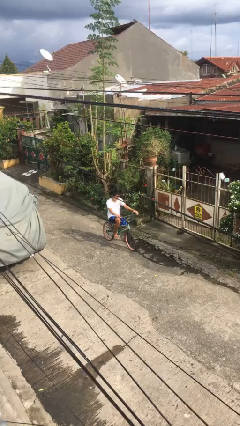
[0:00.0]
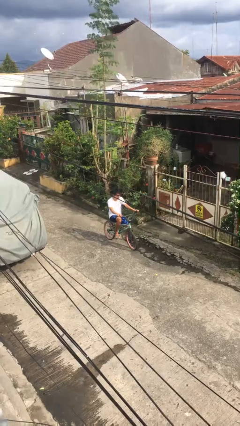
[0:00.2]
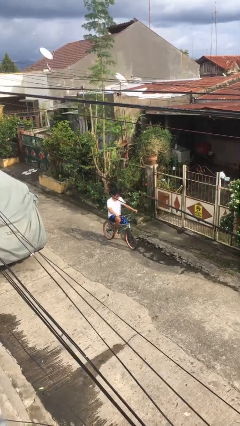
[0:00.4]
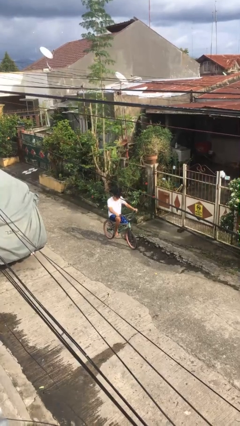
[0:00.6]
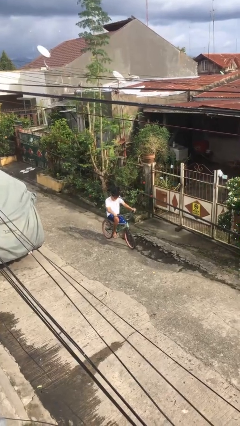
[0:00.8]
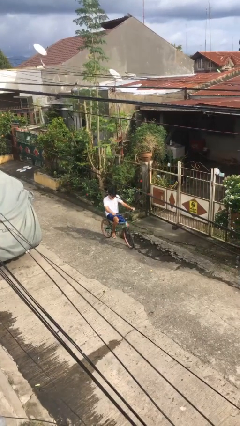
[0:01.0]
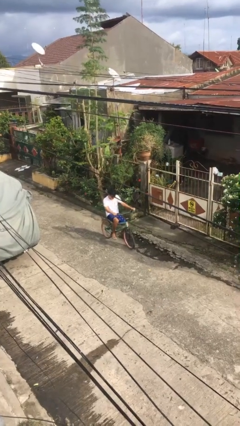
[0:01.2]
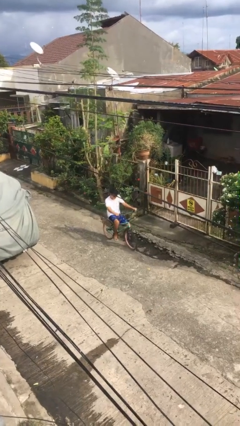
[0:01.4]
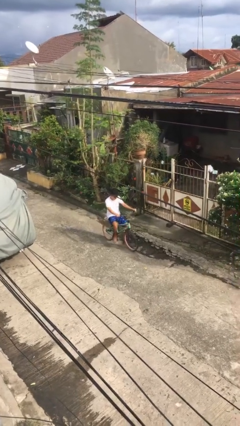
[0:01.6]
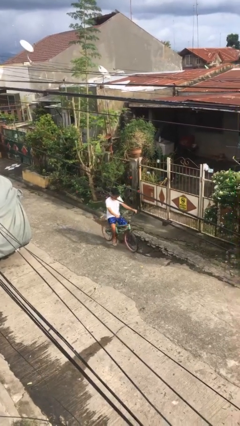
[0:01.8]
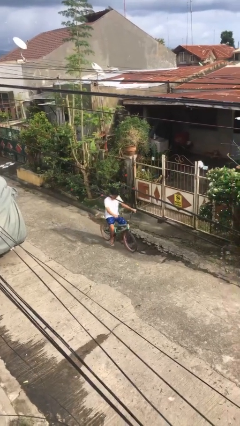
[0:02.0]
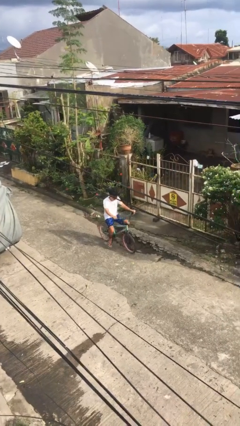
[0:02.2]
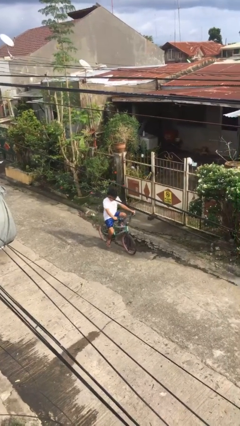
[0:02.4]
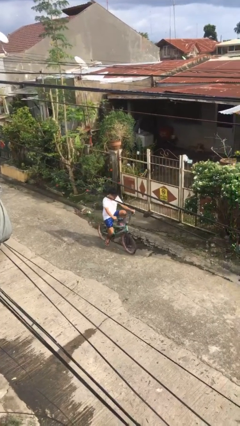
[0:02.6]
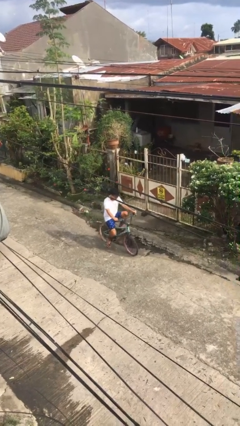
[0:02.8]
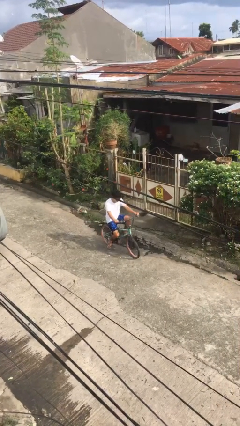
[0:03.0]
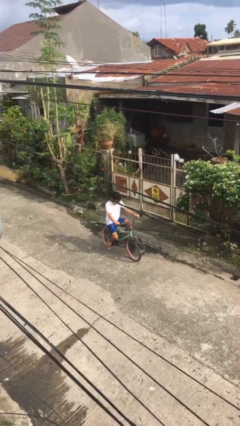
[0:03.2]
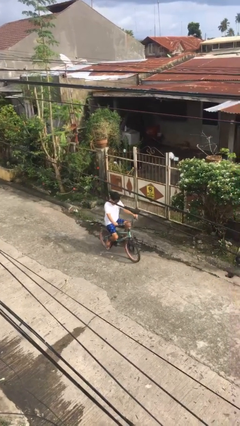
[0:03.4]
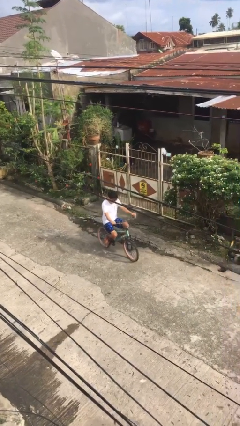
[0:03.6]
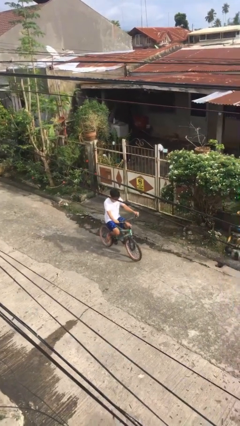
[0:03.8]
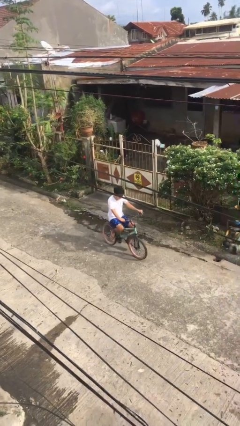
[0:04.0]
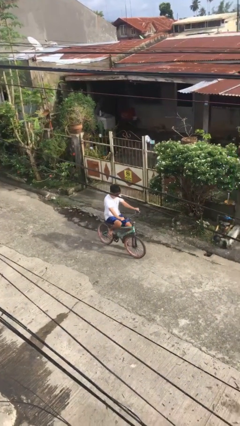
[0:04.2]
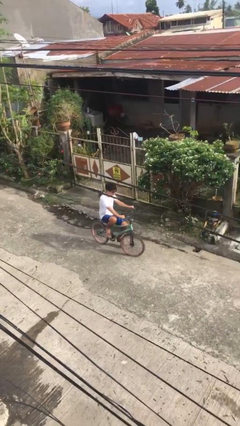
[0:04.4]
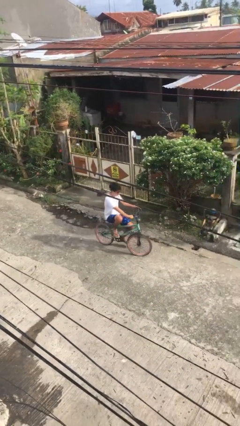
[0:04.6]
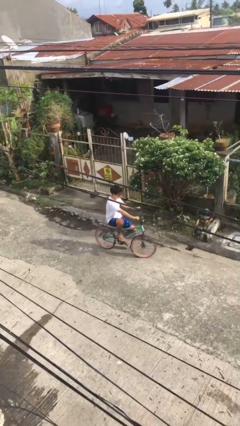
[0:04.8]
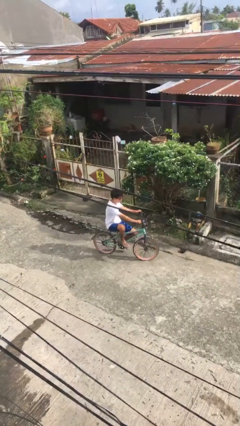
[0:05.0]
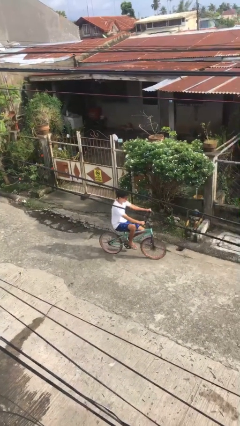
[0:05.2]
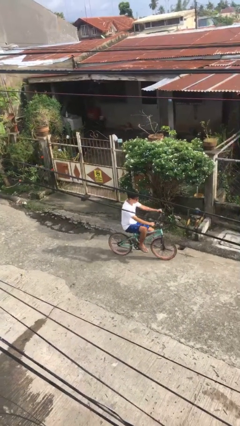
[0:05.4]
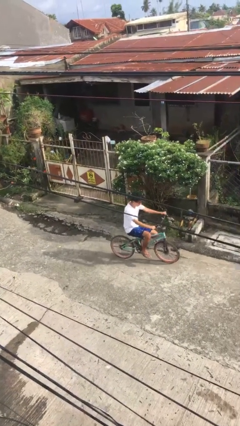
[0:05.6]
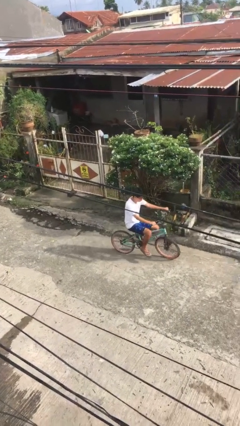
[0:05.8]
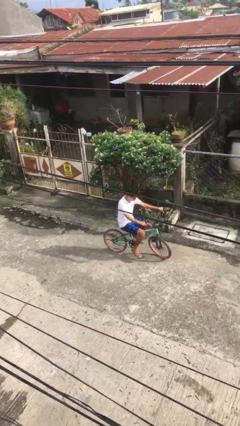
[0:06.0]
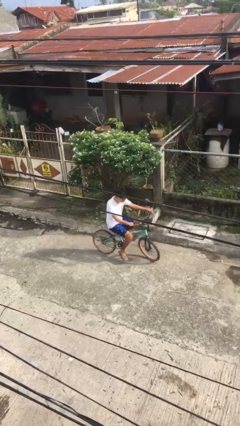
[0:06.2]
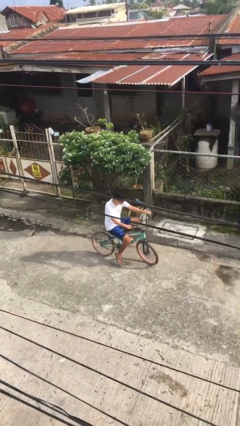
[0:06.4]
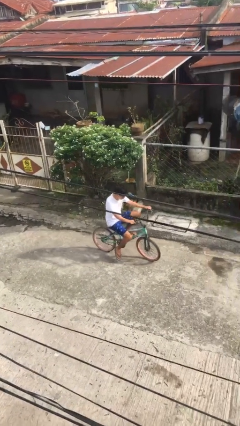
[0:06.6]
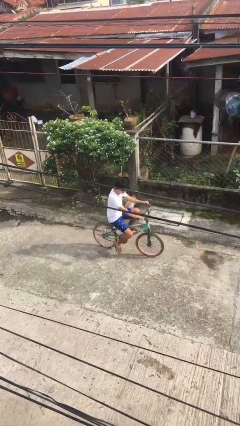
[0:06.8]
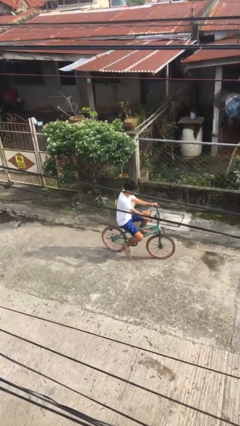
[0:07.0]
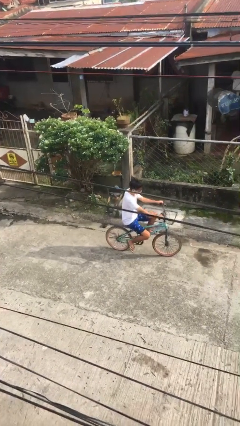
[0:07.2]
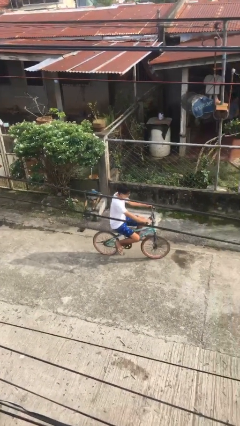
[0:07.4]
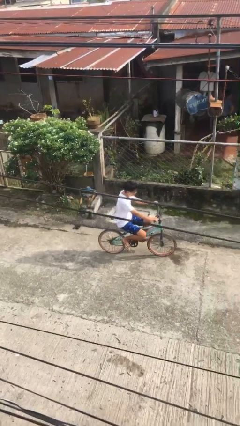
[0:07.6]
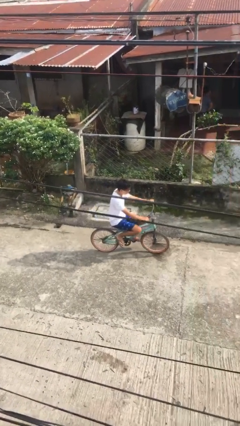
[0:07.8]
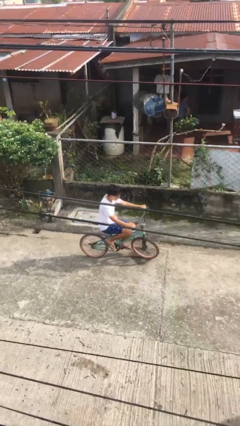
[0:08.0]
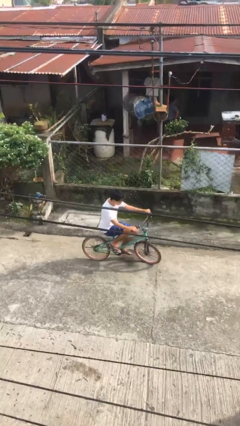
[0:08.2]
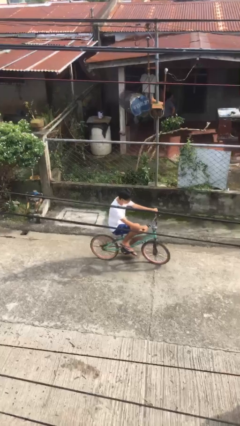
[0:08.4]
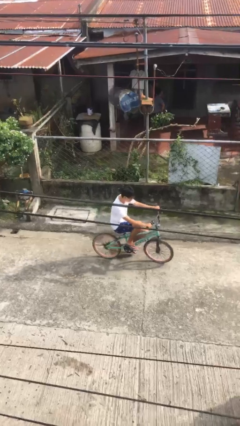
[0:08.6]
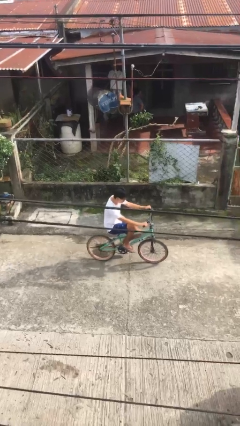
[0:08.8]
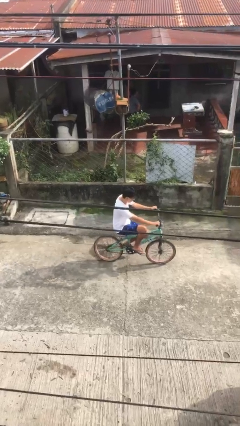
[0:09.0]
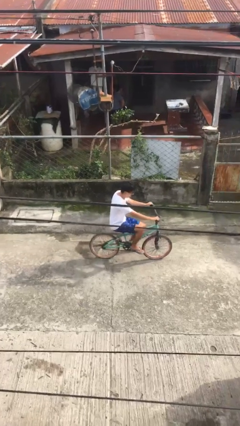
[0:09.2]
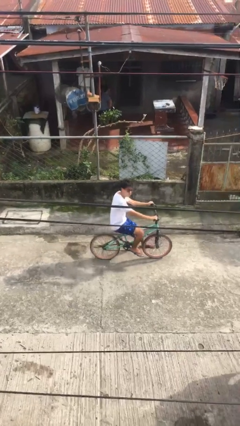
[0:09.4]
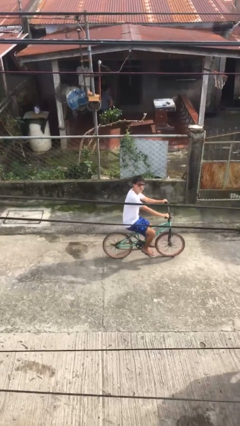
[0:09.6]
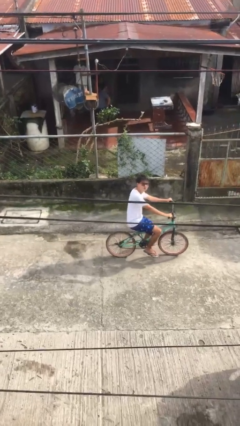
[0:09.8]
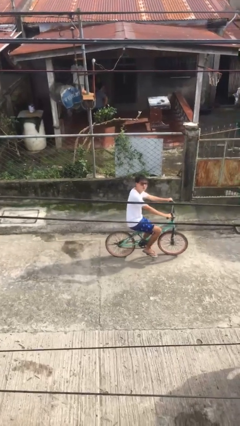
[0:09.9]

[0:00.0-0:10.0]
person rides bicycle

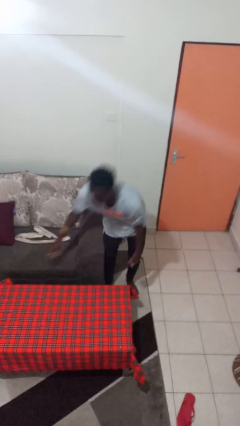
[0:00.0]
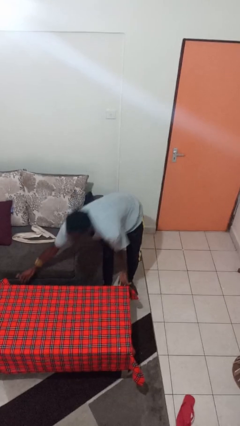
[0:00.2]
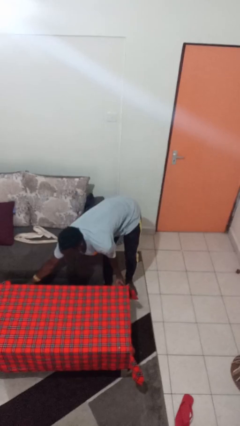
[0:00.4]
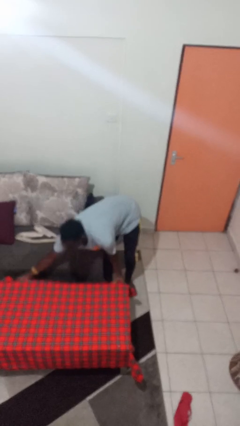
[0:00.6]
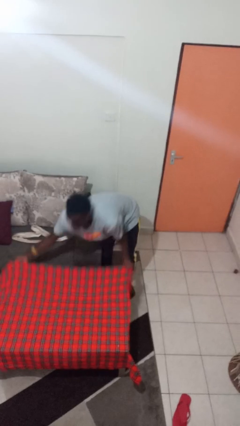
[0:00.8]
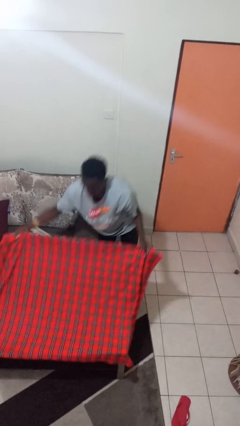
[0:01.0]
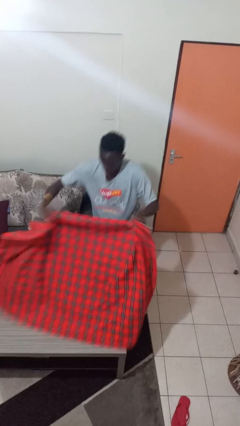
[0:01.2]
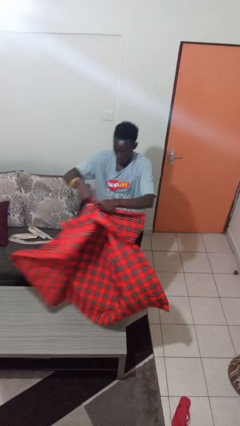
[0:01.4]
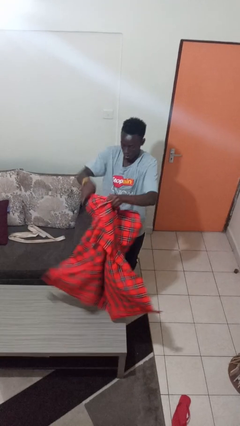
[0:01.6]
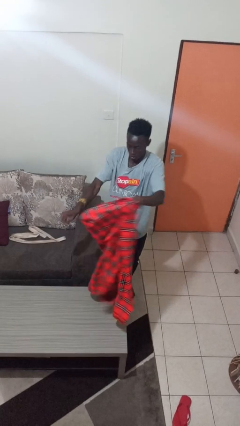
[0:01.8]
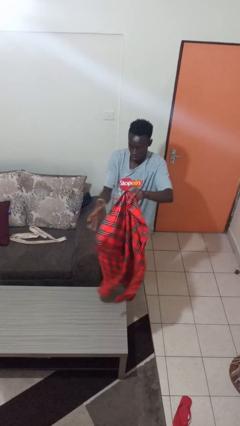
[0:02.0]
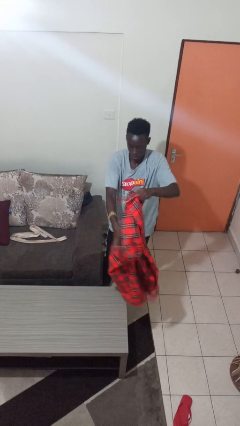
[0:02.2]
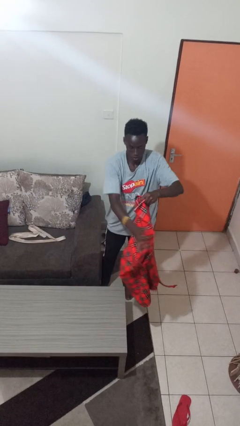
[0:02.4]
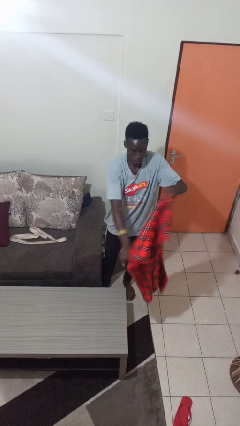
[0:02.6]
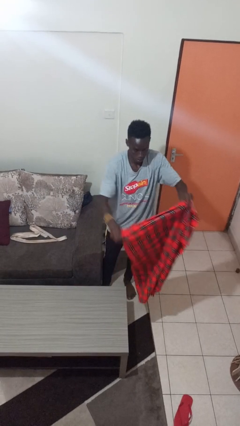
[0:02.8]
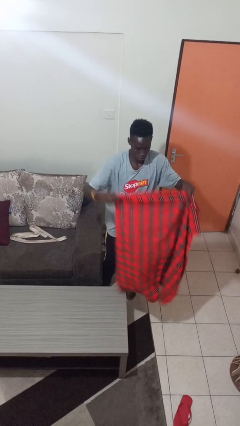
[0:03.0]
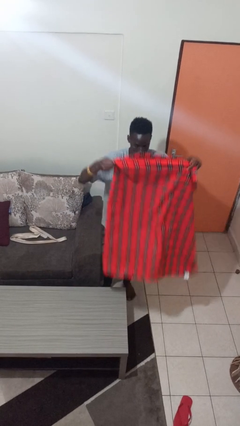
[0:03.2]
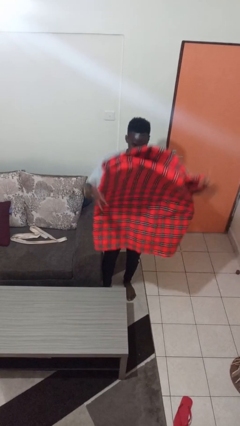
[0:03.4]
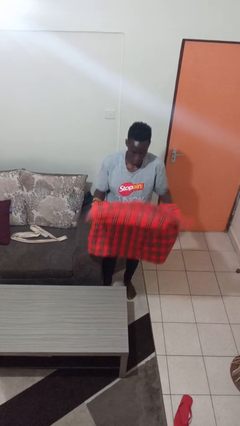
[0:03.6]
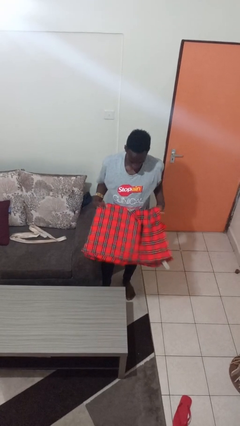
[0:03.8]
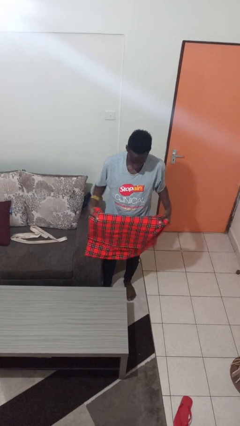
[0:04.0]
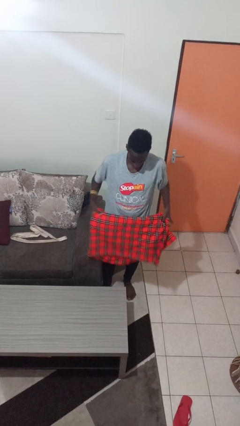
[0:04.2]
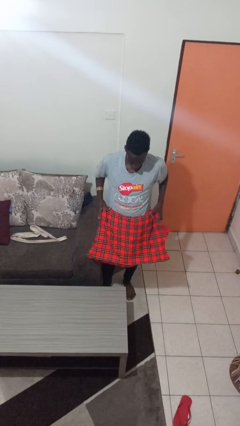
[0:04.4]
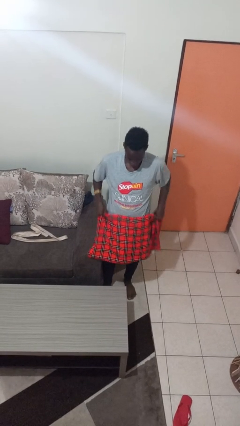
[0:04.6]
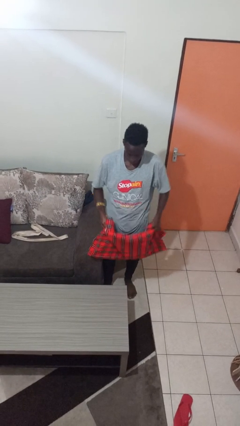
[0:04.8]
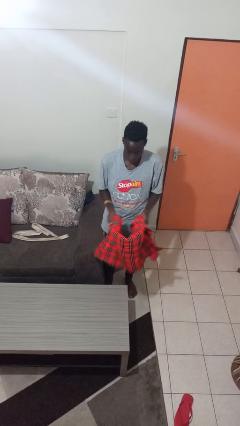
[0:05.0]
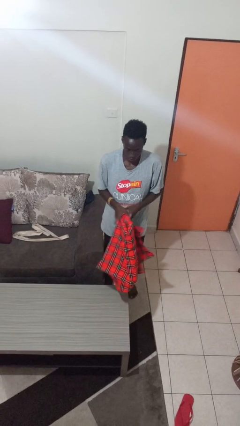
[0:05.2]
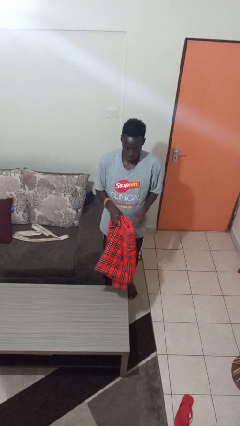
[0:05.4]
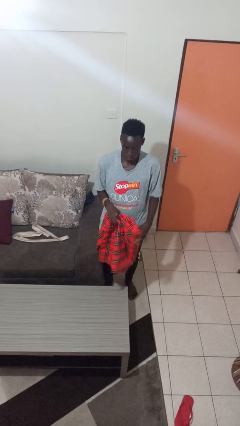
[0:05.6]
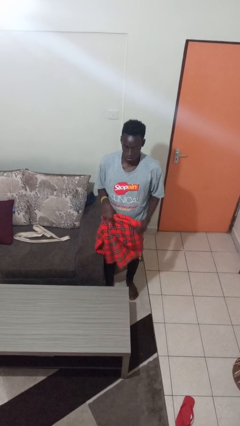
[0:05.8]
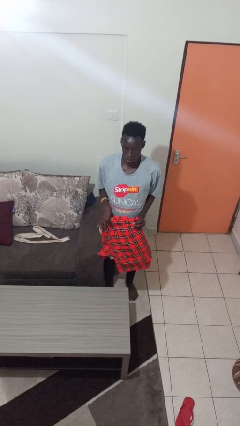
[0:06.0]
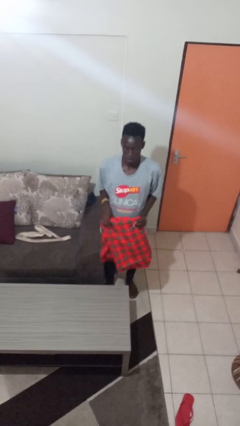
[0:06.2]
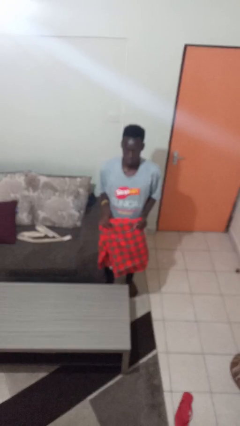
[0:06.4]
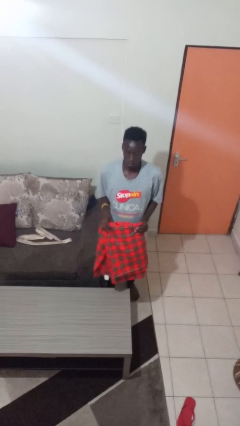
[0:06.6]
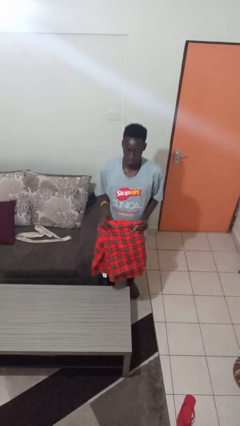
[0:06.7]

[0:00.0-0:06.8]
person folds tablecloth

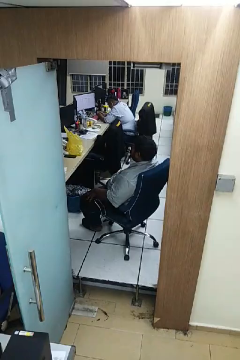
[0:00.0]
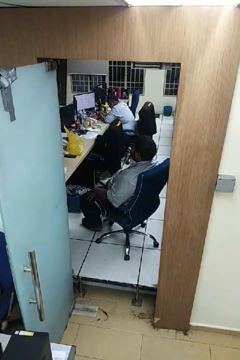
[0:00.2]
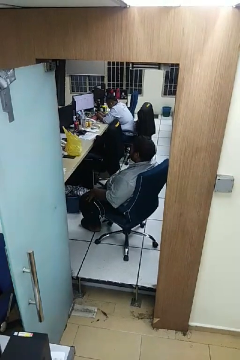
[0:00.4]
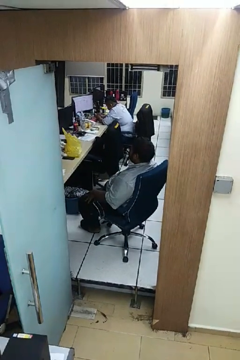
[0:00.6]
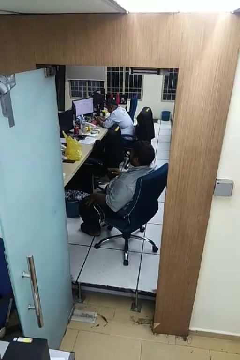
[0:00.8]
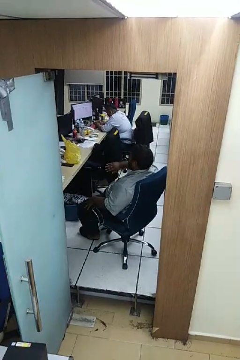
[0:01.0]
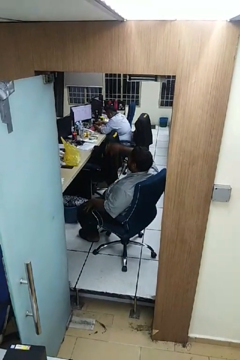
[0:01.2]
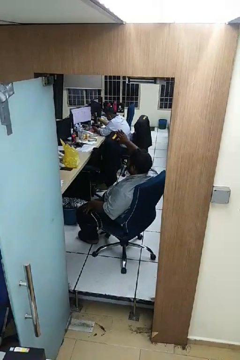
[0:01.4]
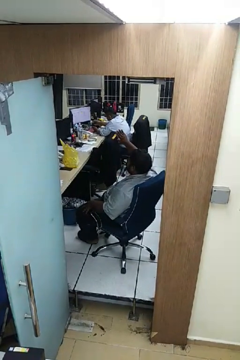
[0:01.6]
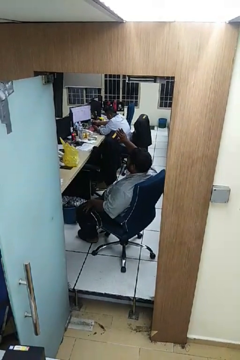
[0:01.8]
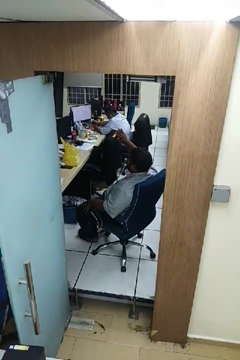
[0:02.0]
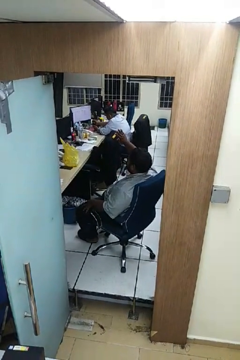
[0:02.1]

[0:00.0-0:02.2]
person gestures swipe up
